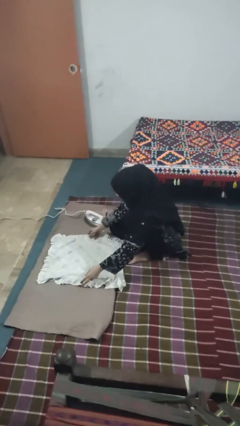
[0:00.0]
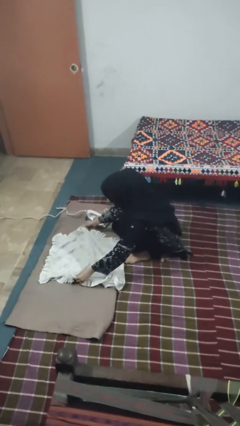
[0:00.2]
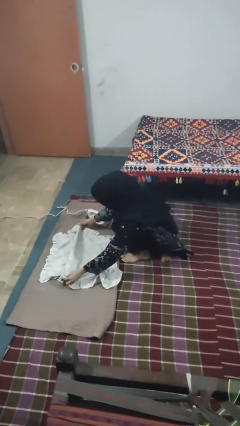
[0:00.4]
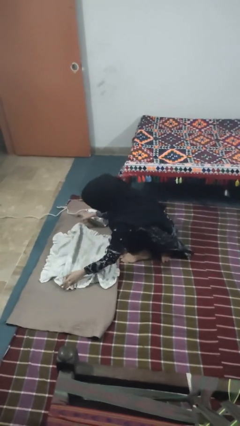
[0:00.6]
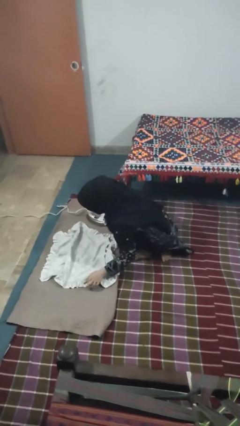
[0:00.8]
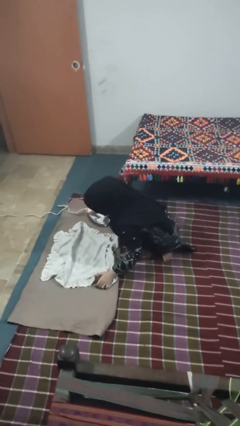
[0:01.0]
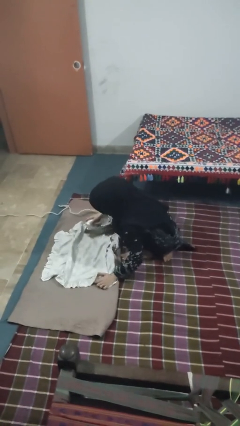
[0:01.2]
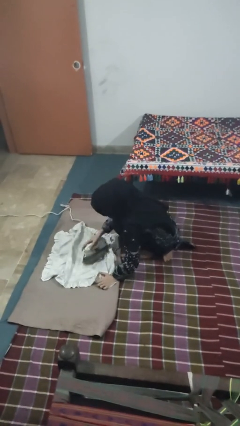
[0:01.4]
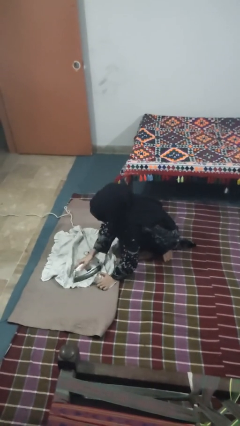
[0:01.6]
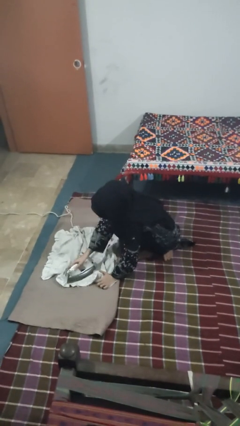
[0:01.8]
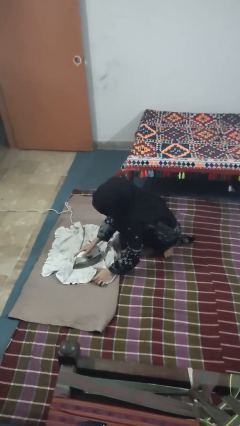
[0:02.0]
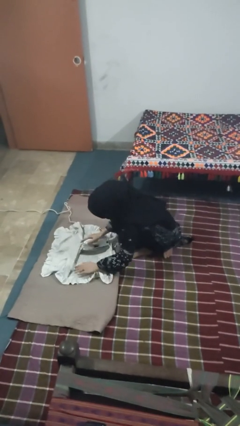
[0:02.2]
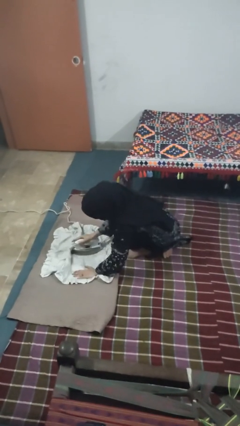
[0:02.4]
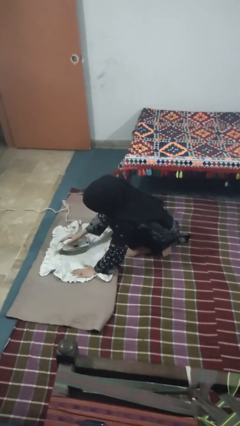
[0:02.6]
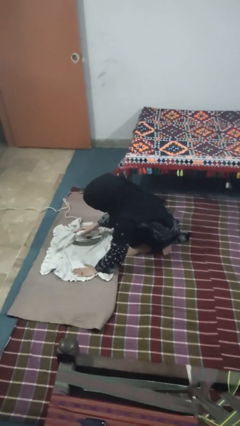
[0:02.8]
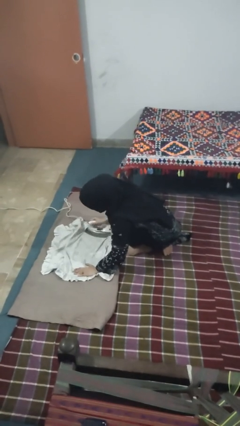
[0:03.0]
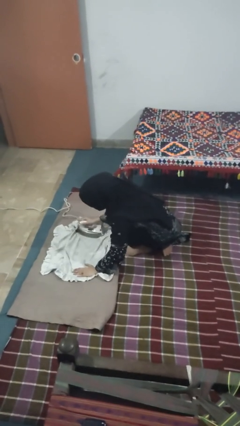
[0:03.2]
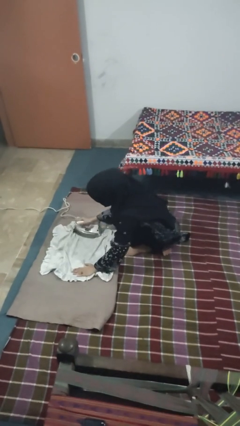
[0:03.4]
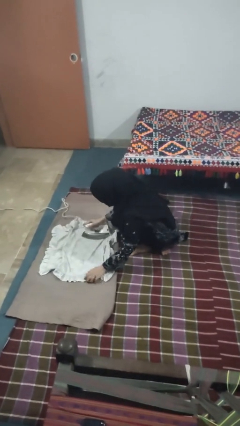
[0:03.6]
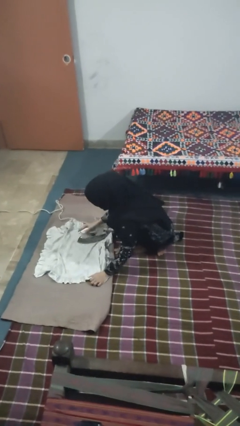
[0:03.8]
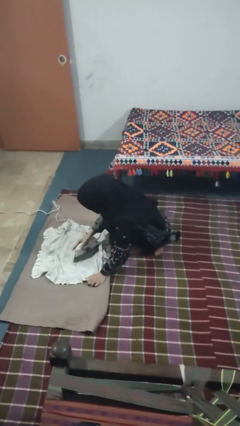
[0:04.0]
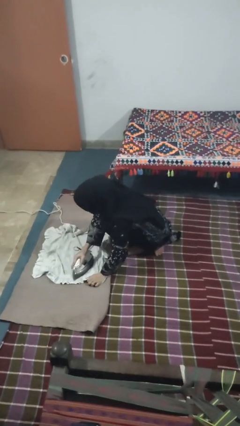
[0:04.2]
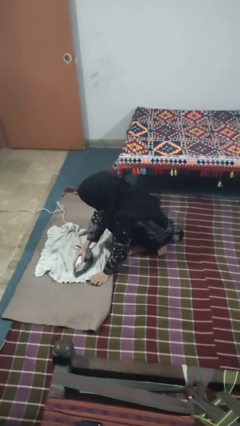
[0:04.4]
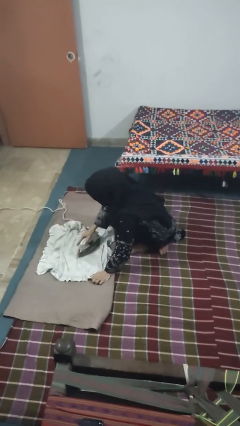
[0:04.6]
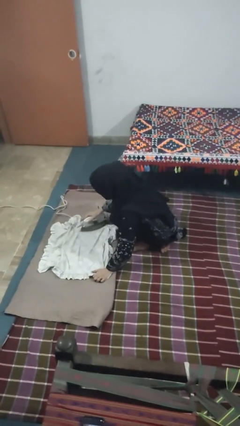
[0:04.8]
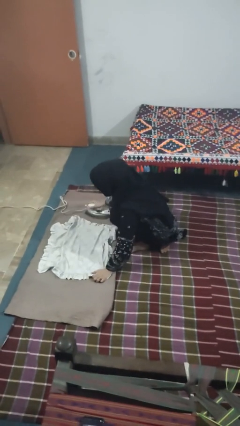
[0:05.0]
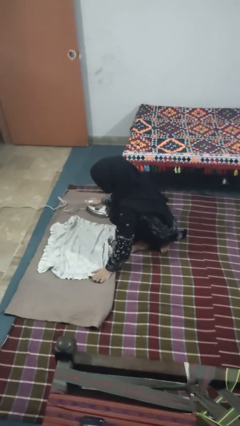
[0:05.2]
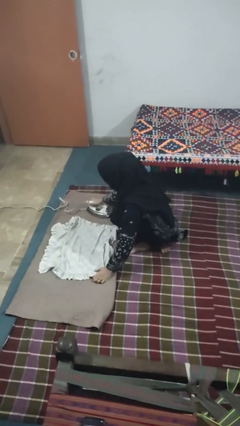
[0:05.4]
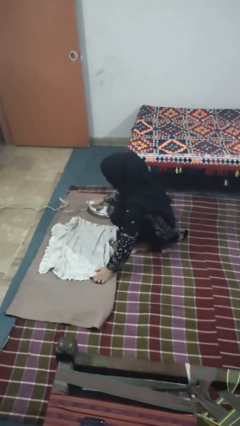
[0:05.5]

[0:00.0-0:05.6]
person irons clothes

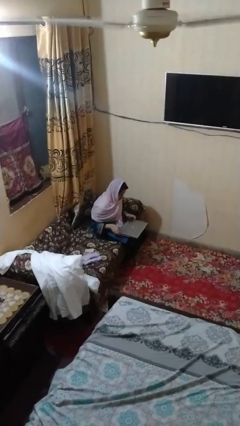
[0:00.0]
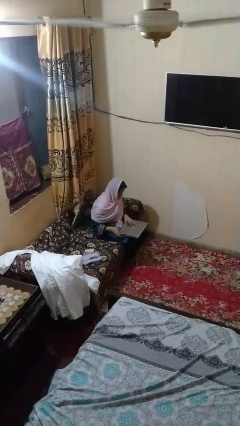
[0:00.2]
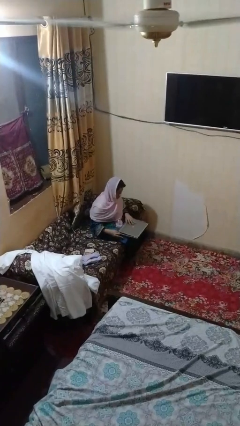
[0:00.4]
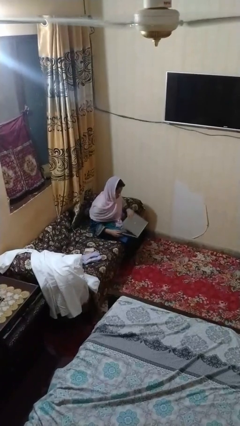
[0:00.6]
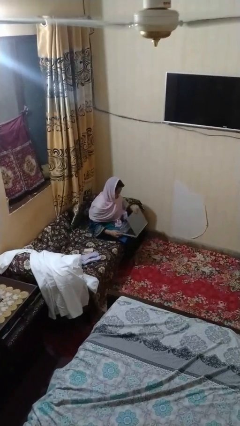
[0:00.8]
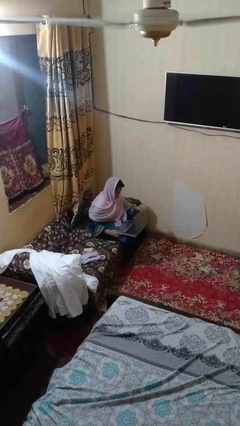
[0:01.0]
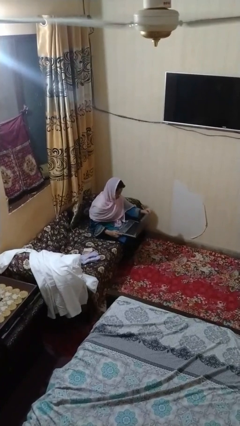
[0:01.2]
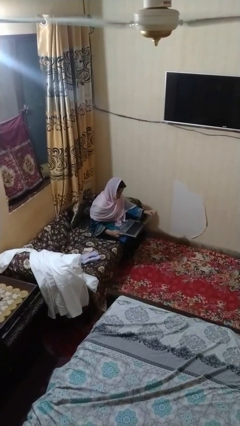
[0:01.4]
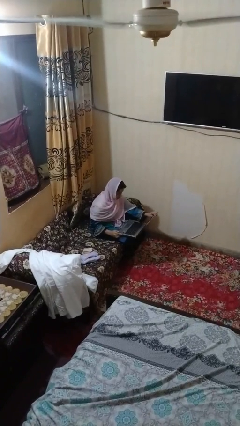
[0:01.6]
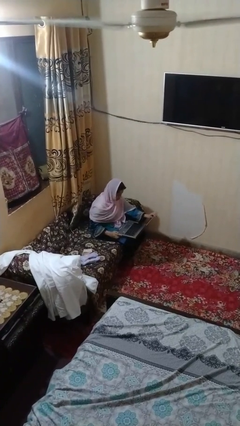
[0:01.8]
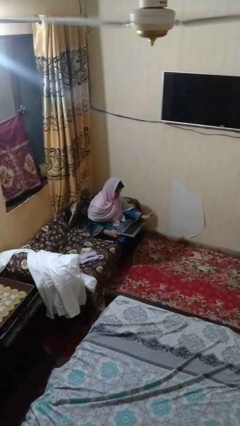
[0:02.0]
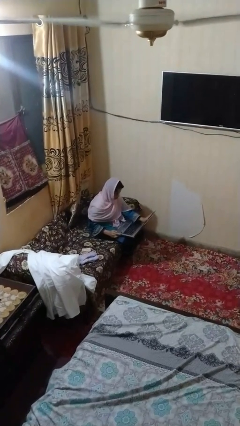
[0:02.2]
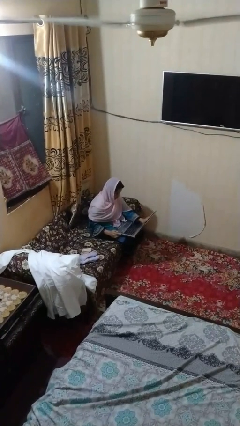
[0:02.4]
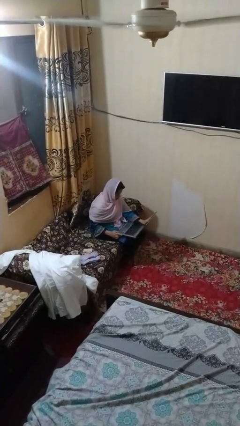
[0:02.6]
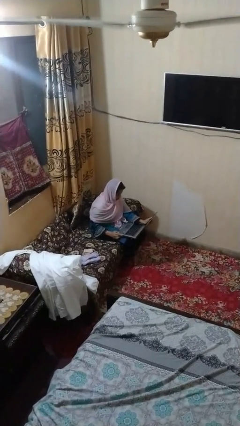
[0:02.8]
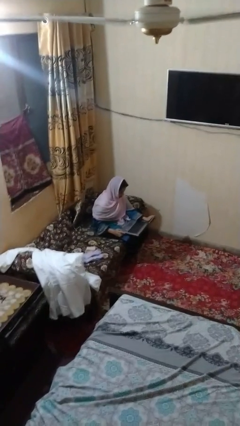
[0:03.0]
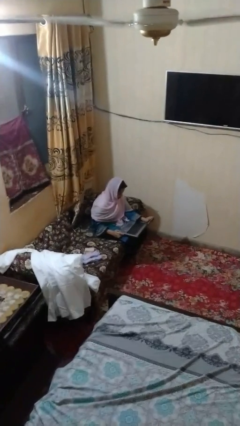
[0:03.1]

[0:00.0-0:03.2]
person opens laptop

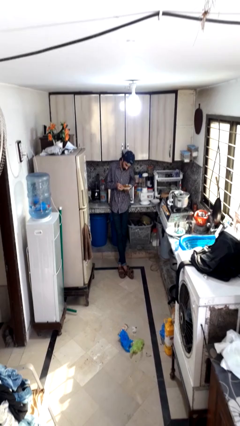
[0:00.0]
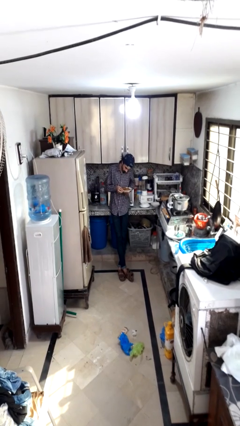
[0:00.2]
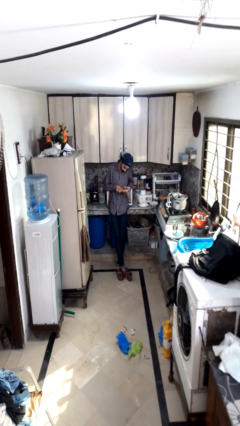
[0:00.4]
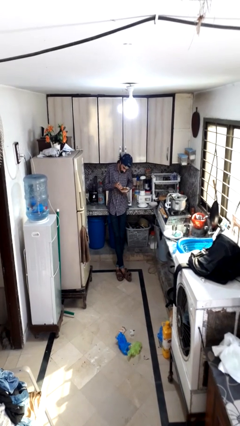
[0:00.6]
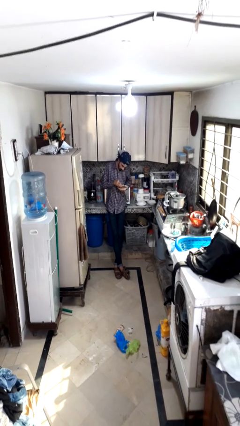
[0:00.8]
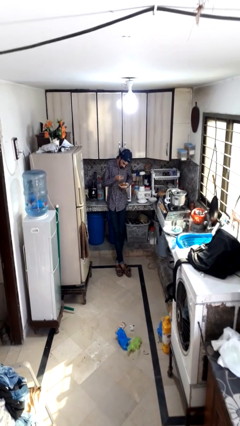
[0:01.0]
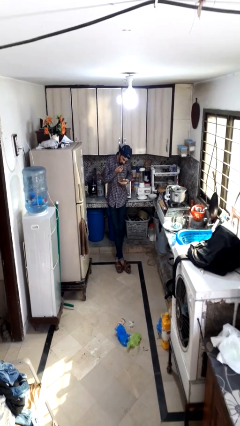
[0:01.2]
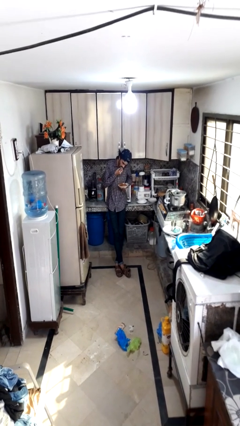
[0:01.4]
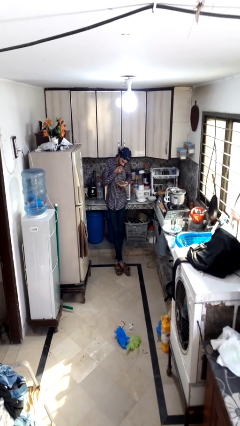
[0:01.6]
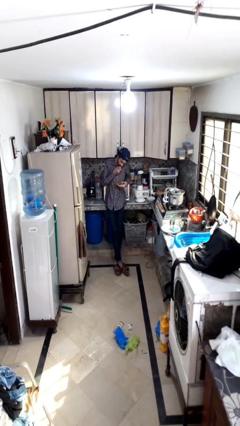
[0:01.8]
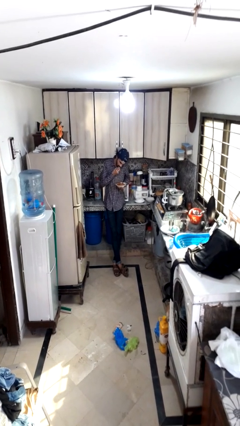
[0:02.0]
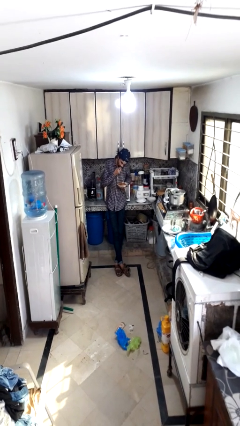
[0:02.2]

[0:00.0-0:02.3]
person eats with hands

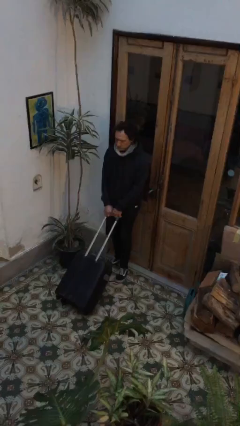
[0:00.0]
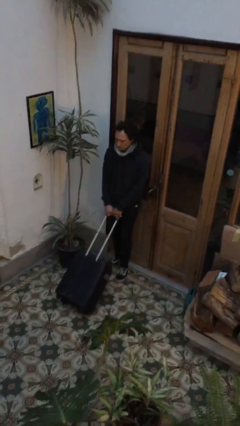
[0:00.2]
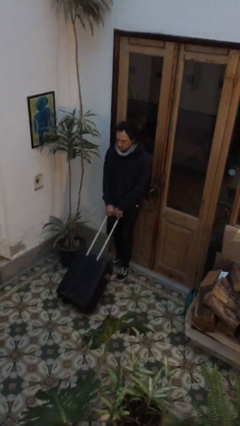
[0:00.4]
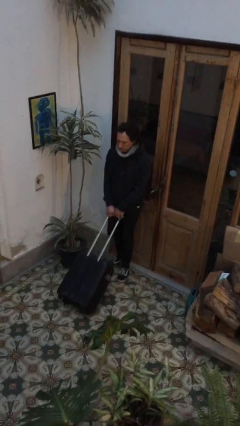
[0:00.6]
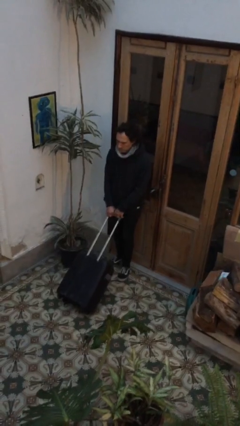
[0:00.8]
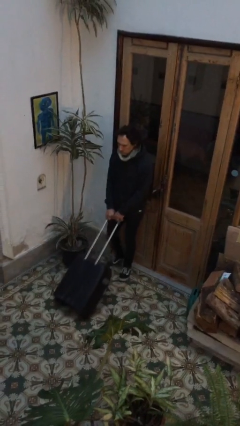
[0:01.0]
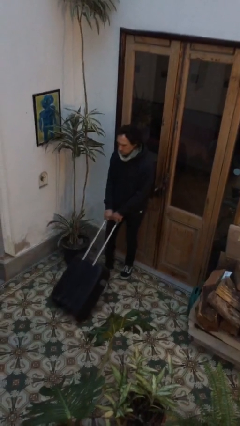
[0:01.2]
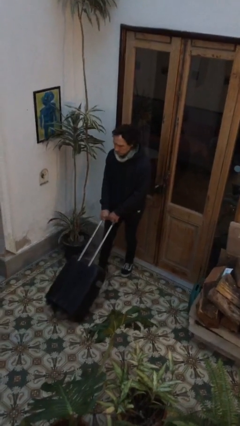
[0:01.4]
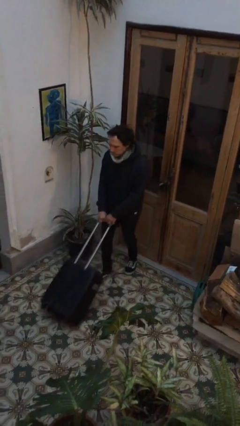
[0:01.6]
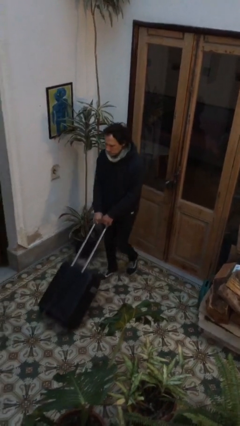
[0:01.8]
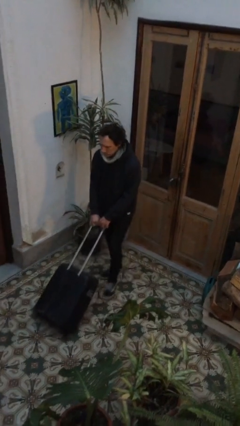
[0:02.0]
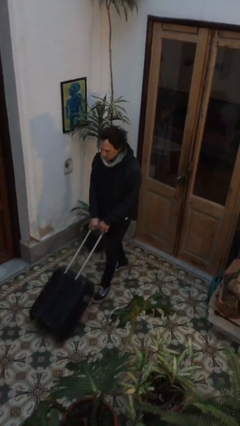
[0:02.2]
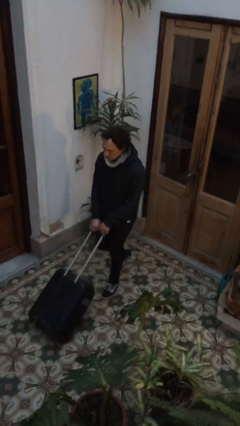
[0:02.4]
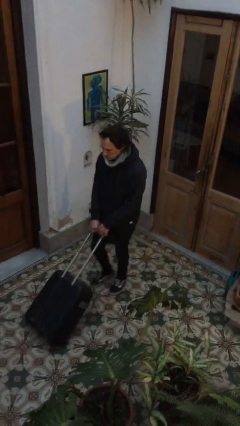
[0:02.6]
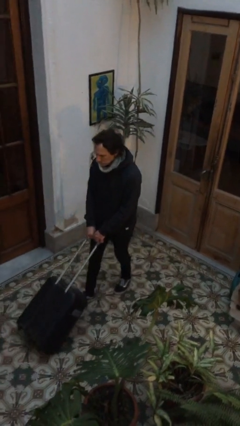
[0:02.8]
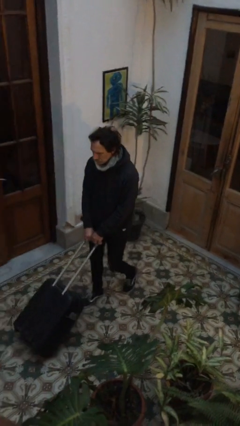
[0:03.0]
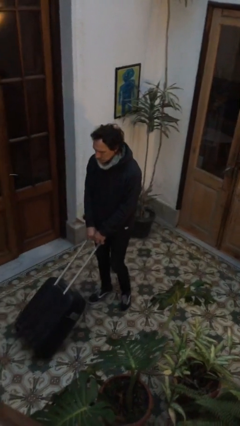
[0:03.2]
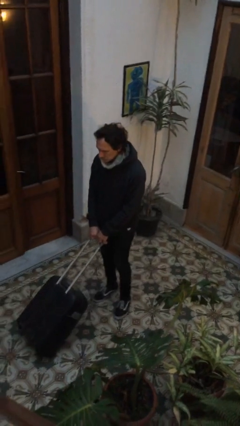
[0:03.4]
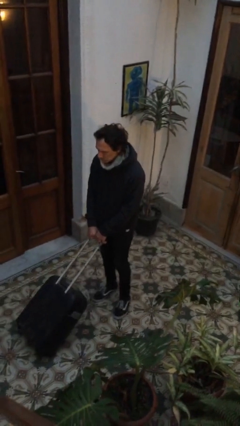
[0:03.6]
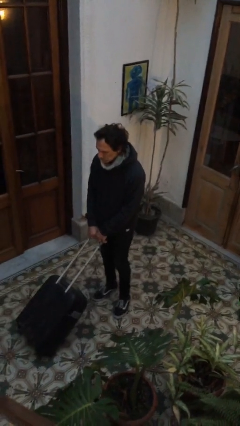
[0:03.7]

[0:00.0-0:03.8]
person pushes wheeled cart

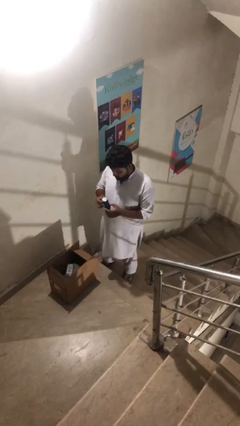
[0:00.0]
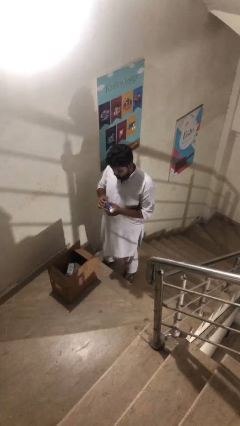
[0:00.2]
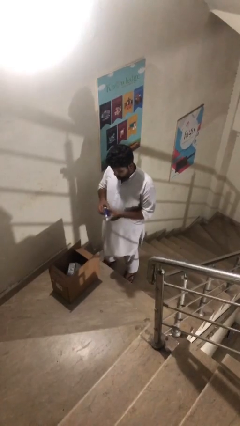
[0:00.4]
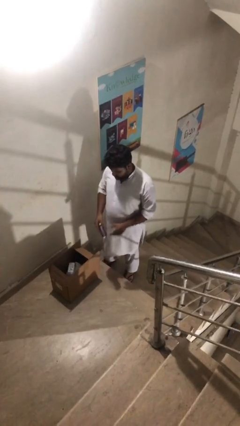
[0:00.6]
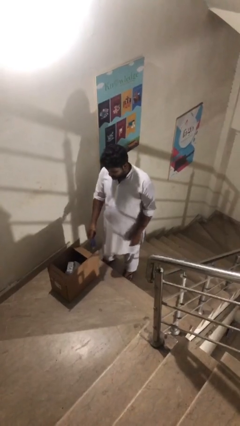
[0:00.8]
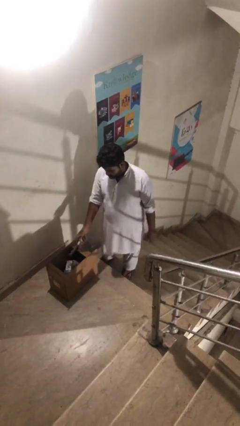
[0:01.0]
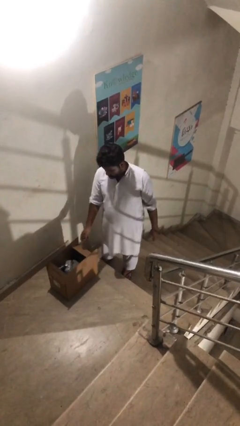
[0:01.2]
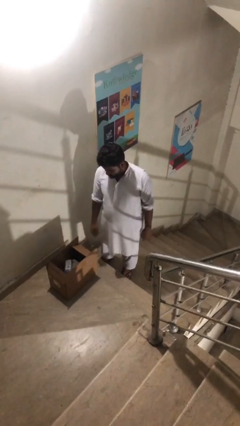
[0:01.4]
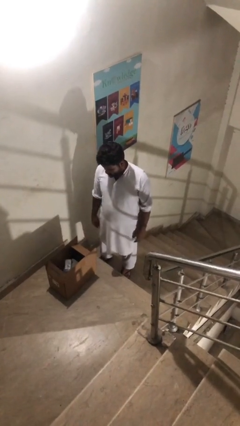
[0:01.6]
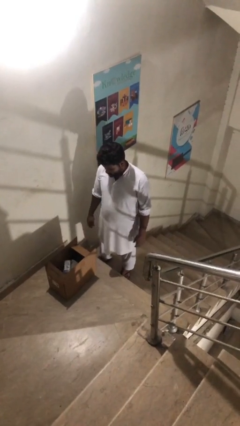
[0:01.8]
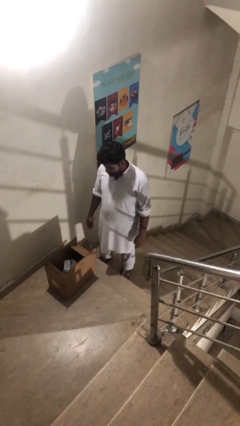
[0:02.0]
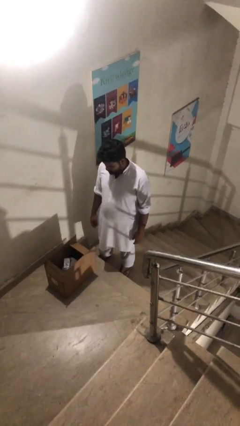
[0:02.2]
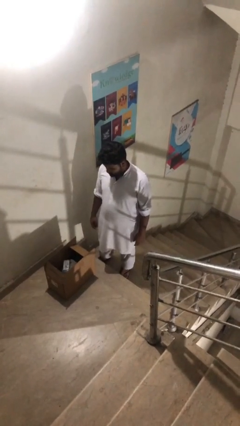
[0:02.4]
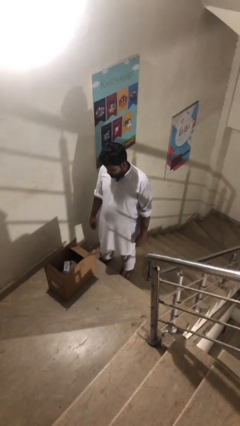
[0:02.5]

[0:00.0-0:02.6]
person puts object into box
